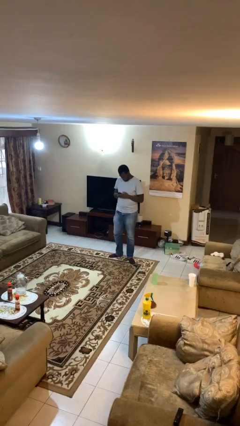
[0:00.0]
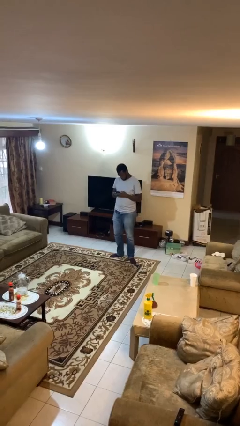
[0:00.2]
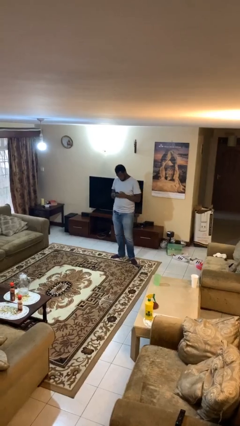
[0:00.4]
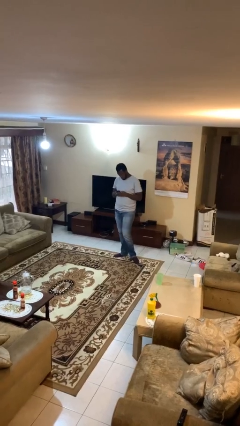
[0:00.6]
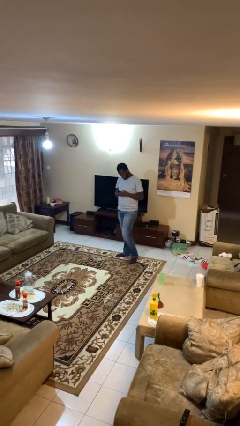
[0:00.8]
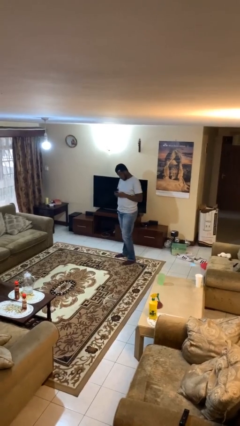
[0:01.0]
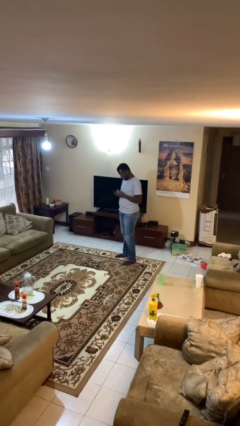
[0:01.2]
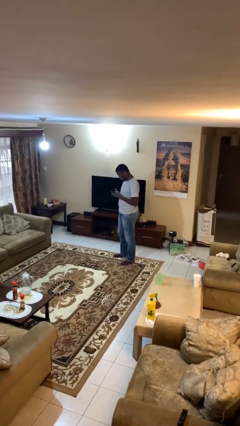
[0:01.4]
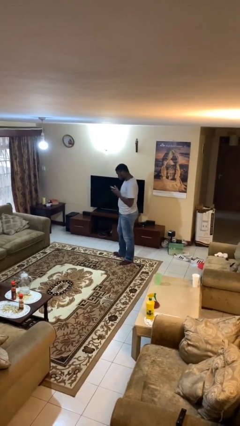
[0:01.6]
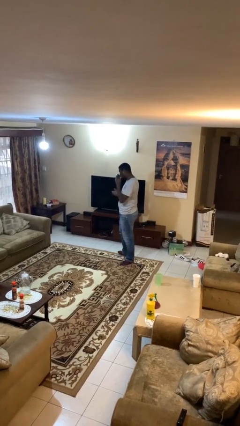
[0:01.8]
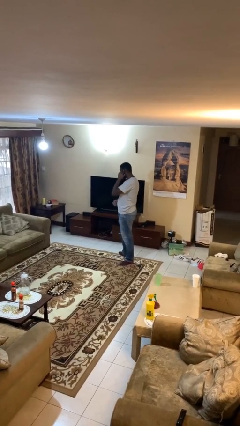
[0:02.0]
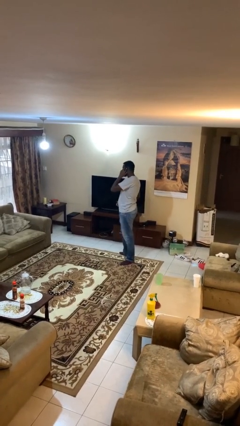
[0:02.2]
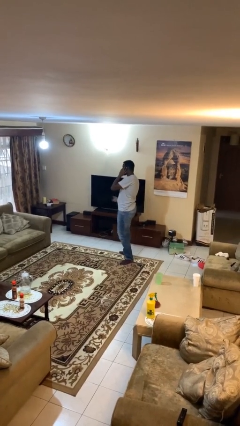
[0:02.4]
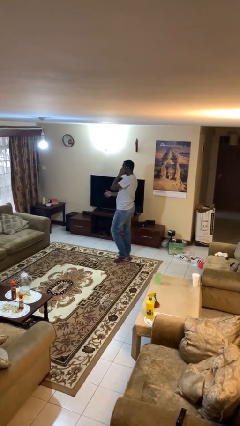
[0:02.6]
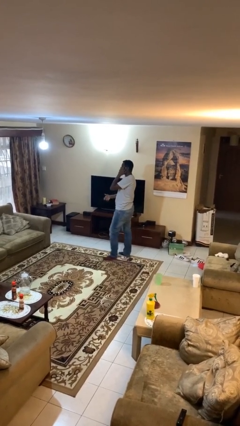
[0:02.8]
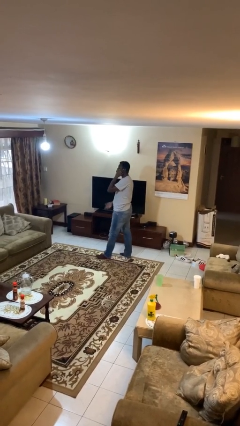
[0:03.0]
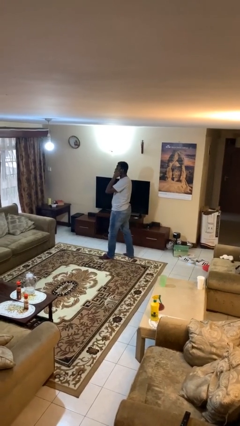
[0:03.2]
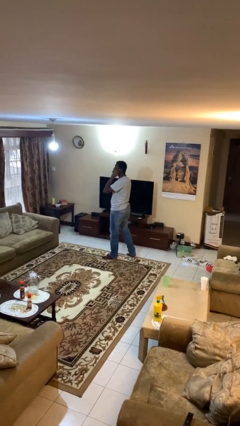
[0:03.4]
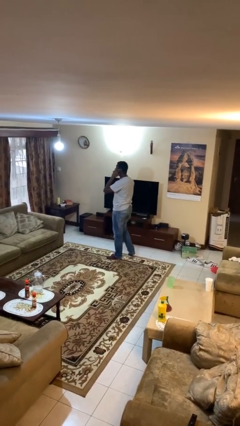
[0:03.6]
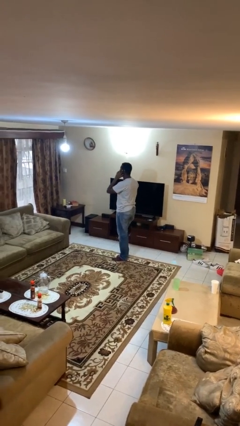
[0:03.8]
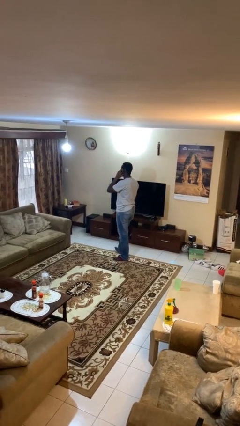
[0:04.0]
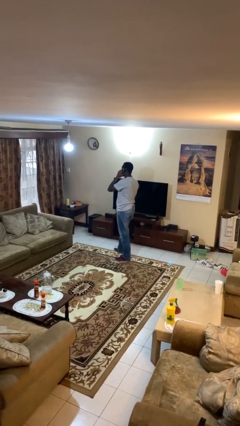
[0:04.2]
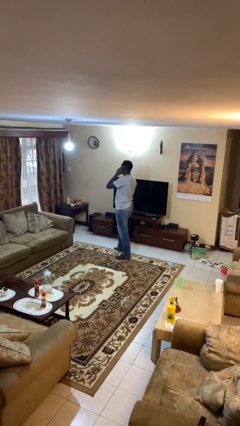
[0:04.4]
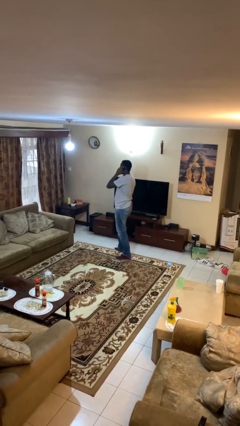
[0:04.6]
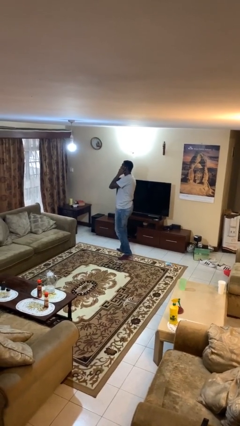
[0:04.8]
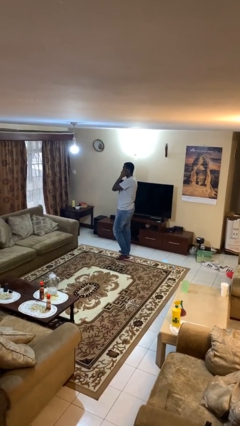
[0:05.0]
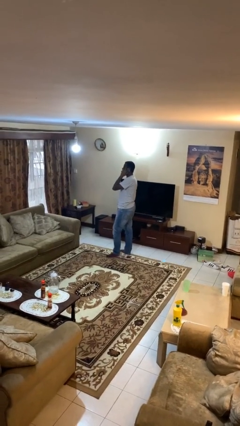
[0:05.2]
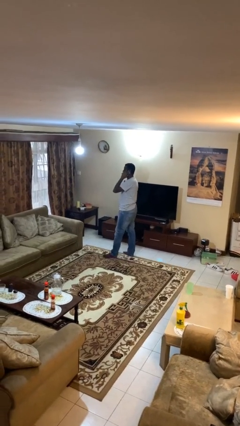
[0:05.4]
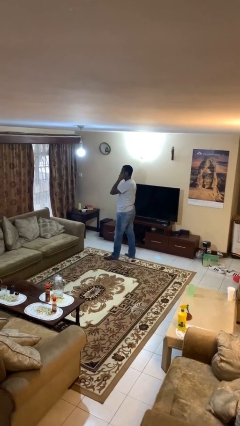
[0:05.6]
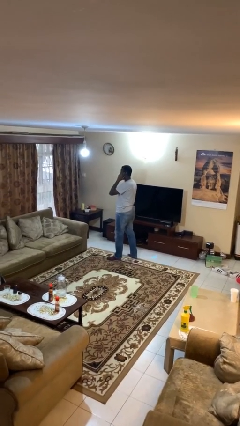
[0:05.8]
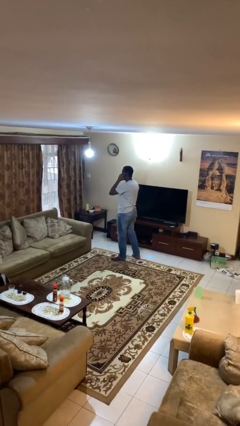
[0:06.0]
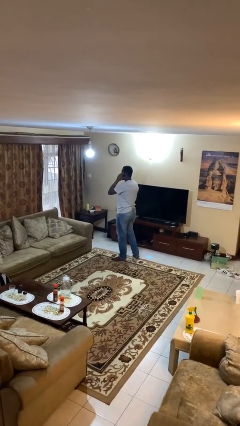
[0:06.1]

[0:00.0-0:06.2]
person talks on phone

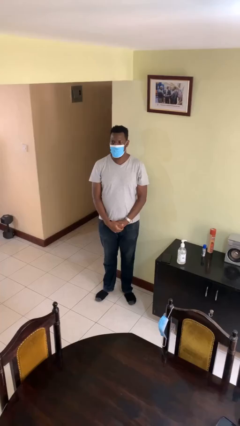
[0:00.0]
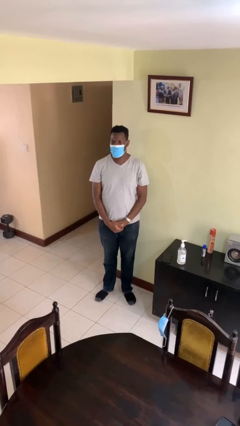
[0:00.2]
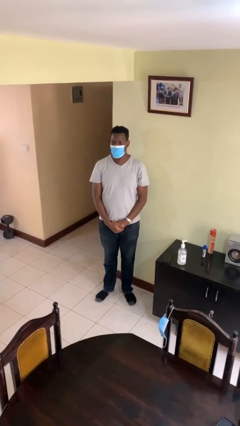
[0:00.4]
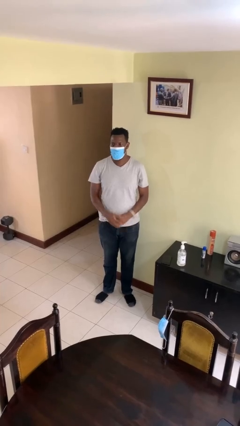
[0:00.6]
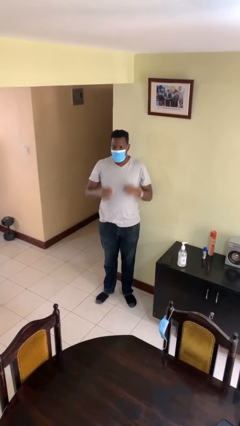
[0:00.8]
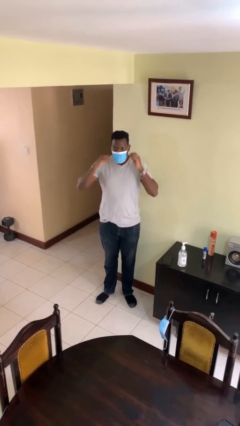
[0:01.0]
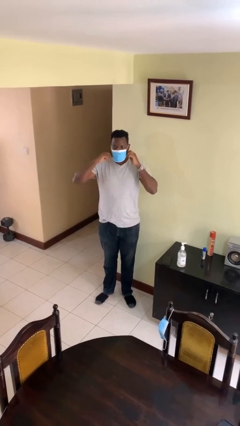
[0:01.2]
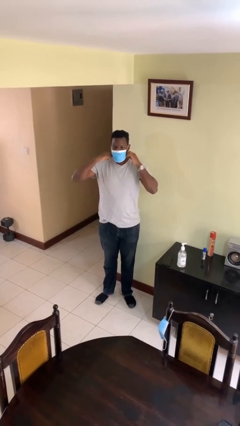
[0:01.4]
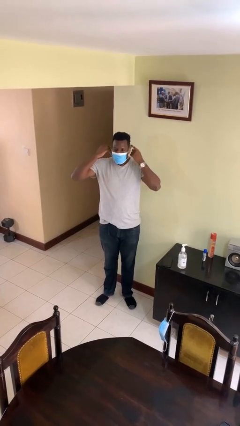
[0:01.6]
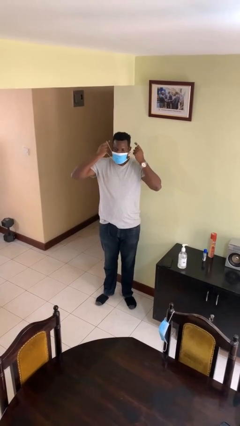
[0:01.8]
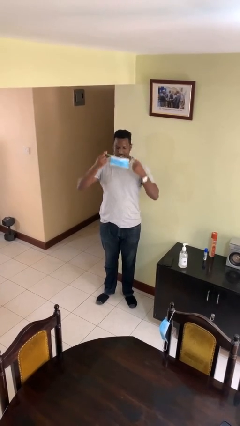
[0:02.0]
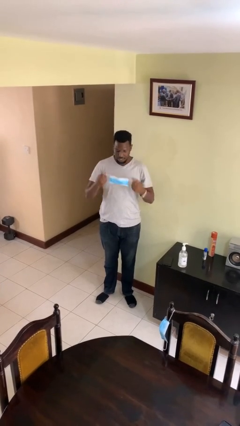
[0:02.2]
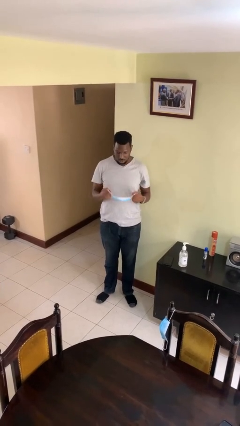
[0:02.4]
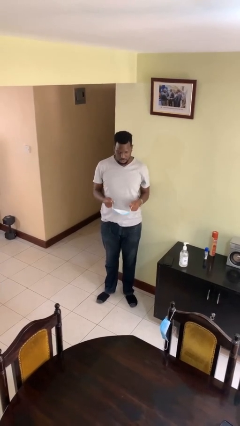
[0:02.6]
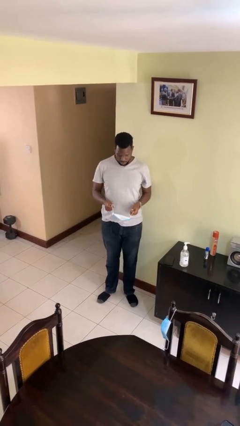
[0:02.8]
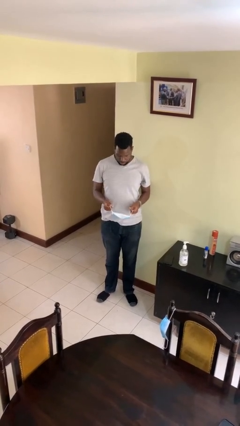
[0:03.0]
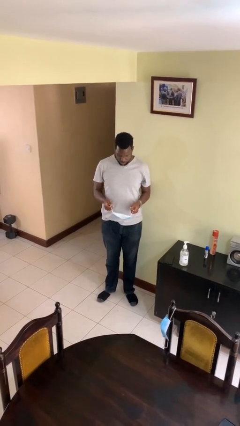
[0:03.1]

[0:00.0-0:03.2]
person takes off facemask

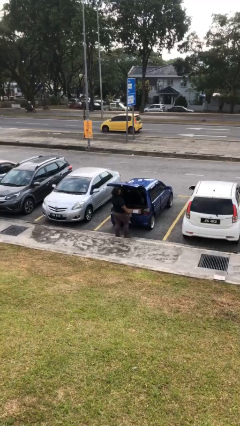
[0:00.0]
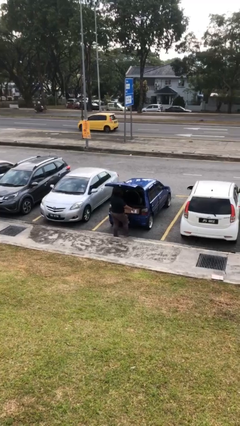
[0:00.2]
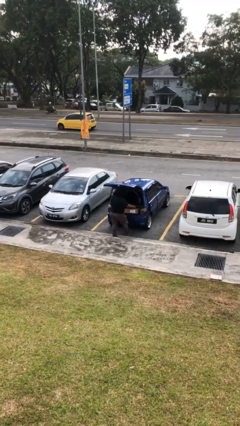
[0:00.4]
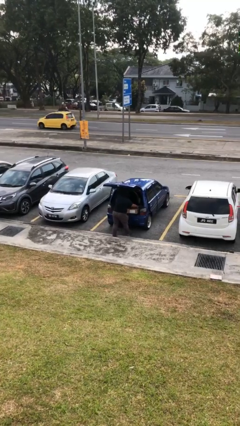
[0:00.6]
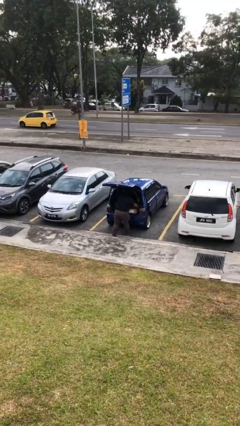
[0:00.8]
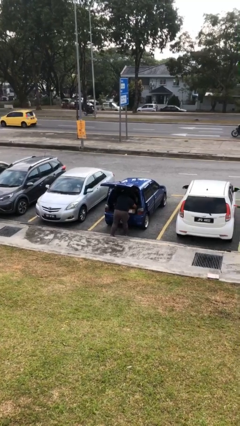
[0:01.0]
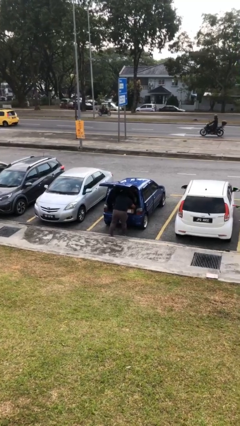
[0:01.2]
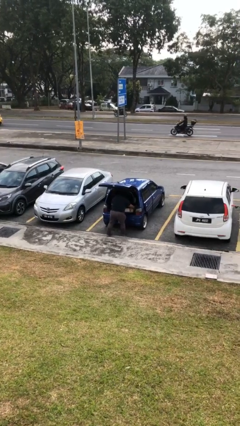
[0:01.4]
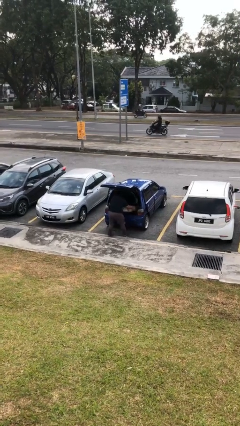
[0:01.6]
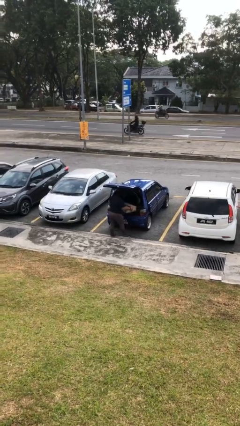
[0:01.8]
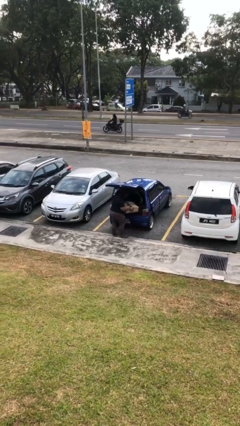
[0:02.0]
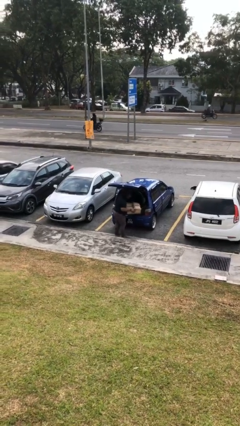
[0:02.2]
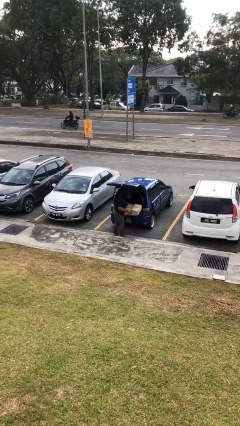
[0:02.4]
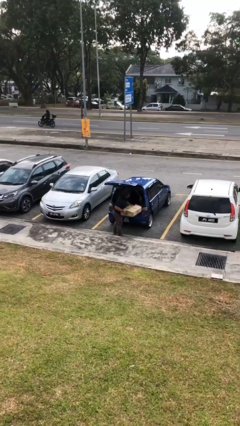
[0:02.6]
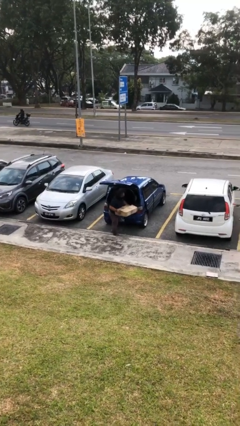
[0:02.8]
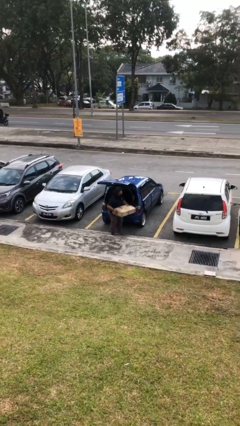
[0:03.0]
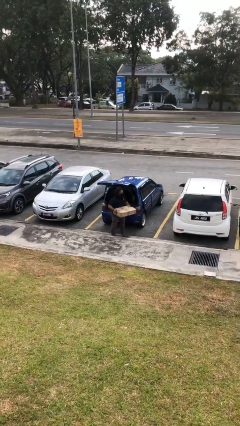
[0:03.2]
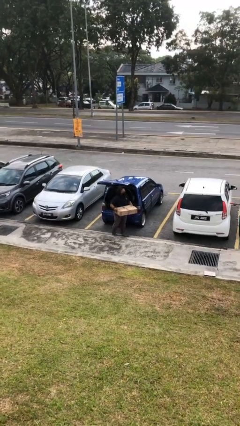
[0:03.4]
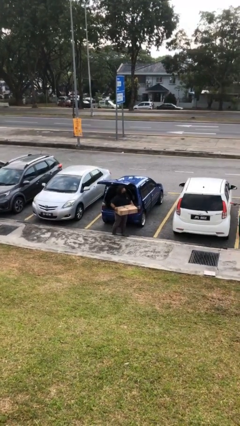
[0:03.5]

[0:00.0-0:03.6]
person unloads car

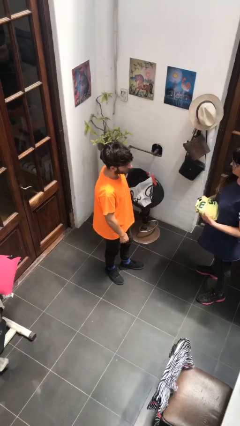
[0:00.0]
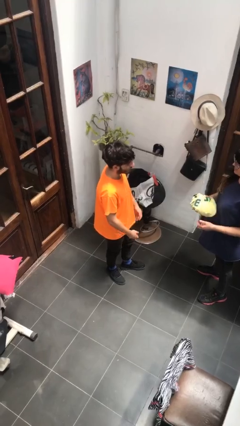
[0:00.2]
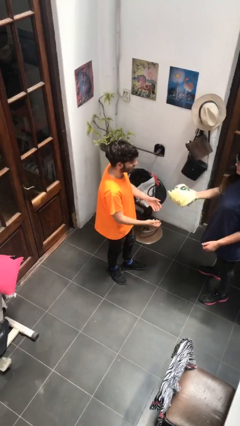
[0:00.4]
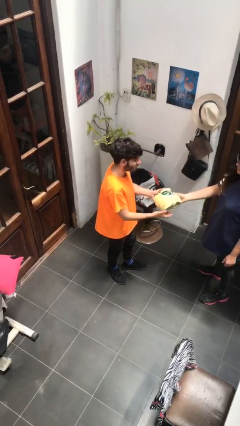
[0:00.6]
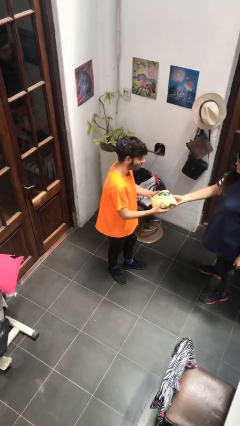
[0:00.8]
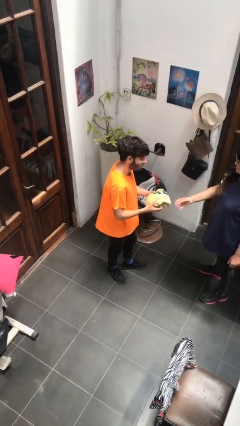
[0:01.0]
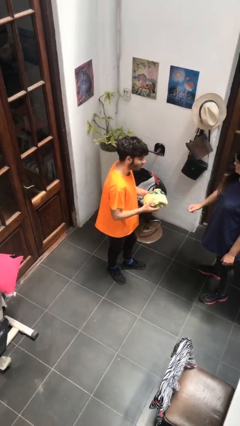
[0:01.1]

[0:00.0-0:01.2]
person transfers object to person

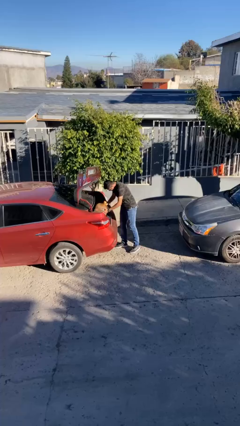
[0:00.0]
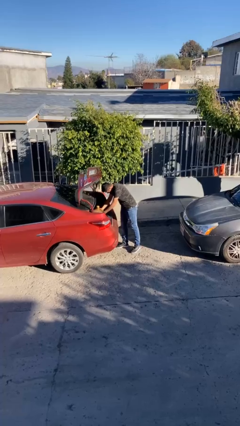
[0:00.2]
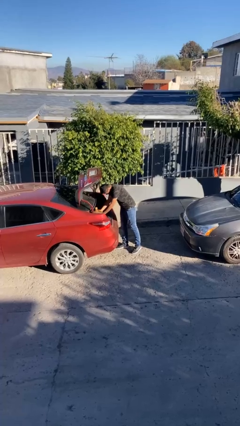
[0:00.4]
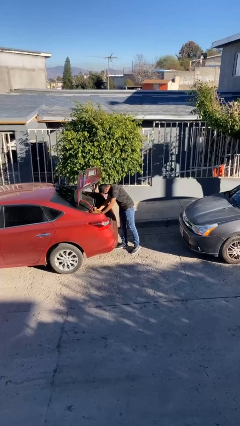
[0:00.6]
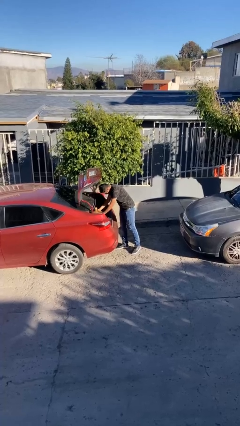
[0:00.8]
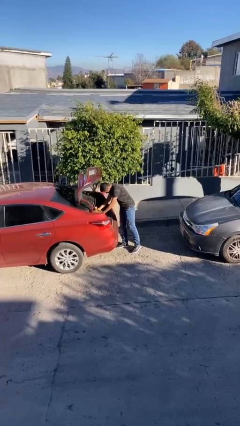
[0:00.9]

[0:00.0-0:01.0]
person loads car

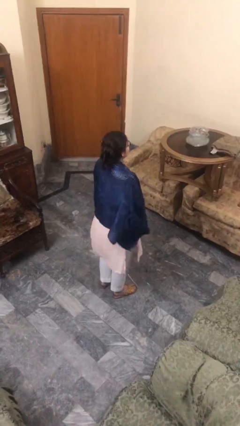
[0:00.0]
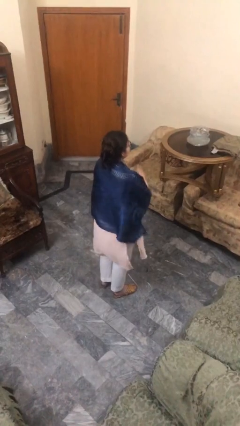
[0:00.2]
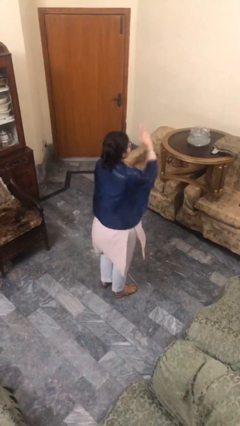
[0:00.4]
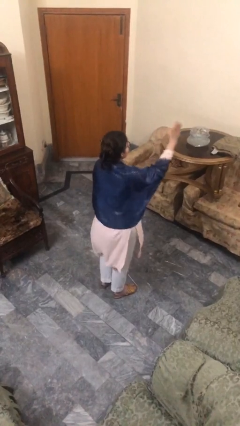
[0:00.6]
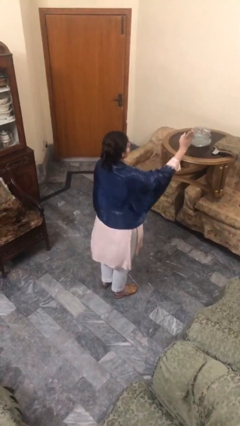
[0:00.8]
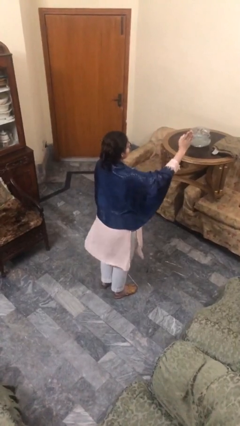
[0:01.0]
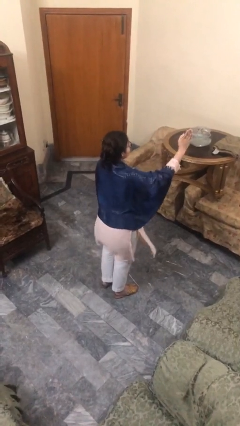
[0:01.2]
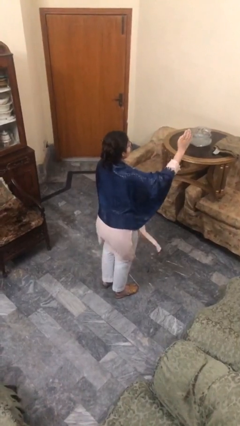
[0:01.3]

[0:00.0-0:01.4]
person gestures swipe right

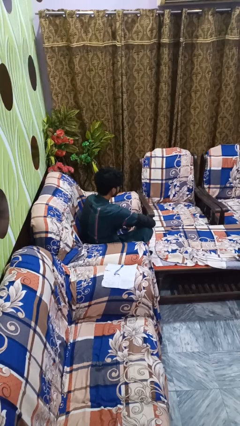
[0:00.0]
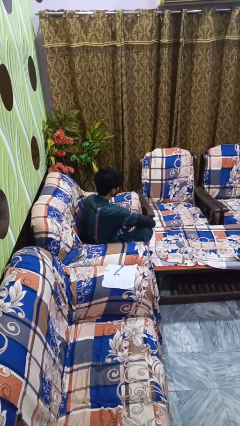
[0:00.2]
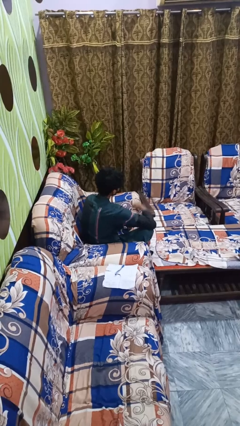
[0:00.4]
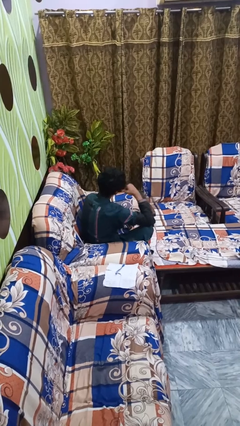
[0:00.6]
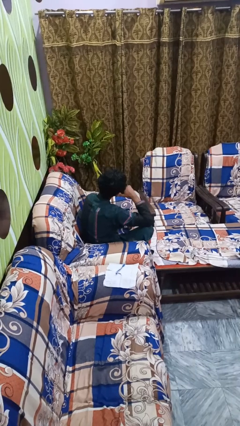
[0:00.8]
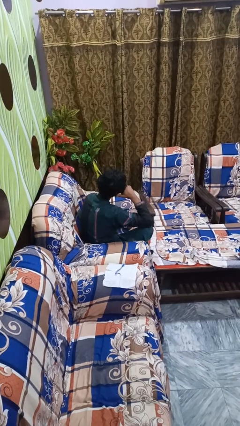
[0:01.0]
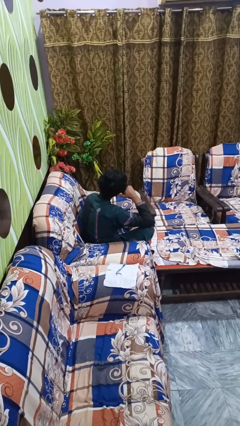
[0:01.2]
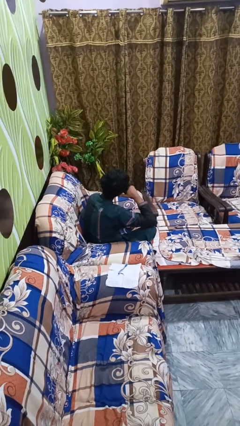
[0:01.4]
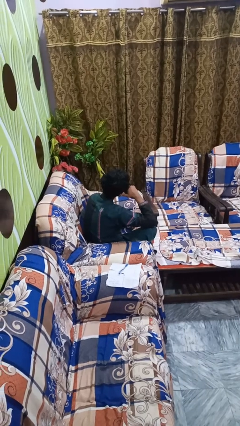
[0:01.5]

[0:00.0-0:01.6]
person gestures call me
